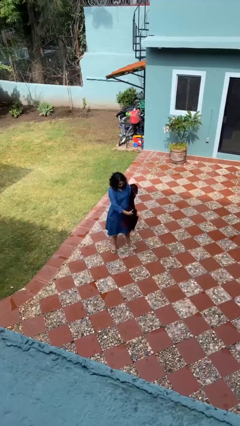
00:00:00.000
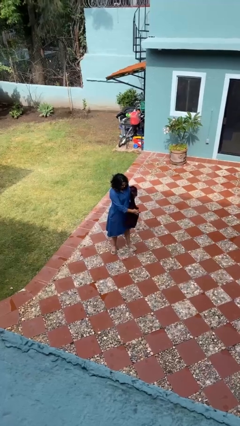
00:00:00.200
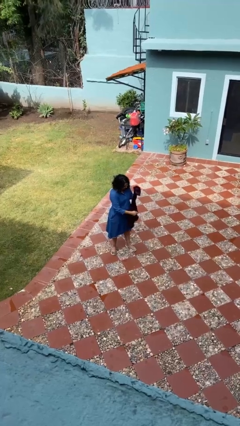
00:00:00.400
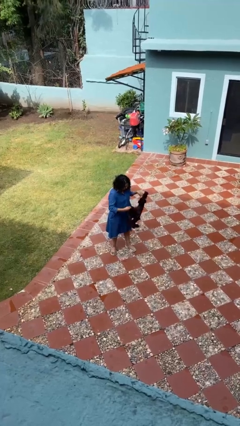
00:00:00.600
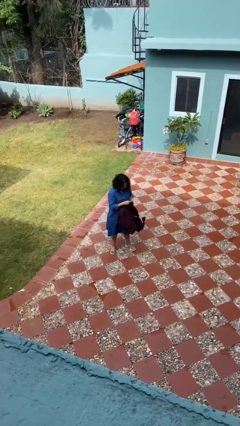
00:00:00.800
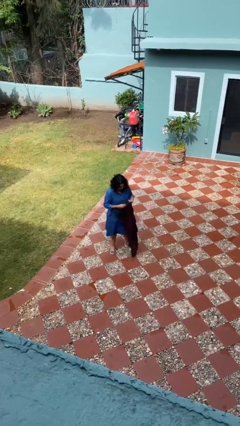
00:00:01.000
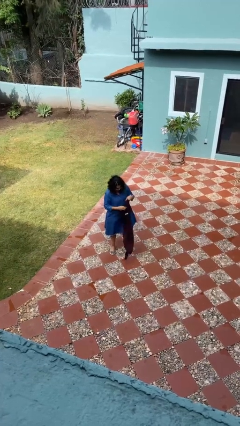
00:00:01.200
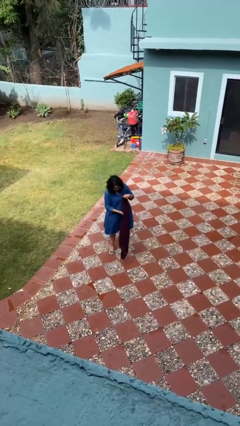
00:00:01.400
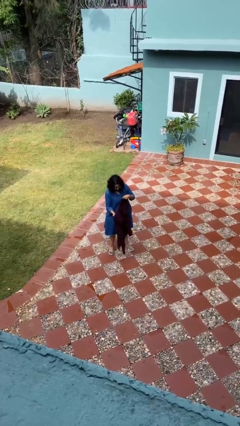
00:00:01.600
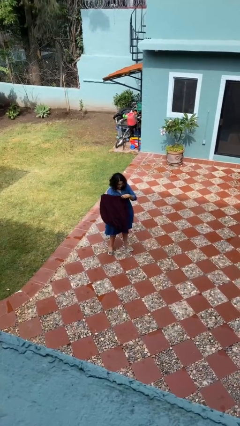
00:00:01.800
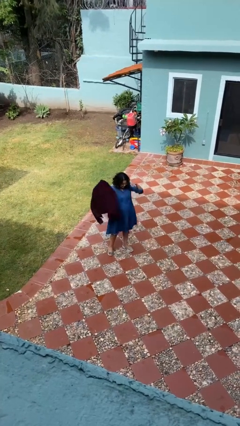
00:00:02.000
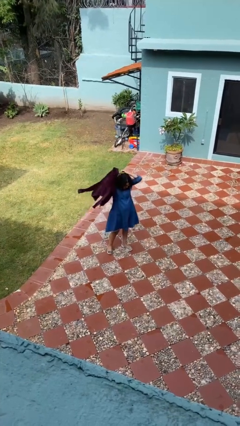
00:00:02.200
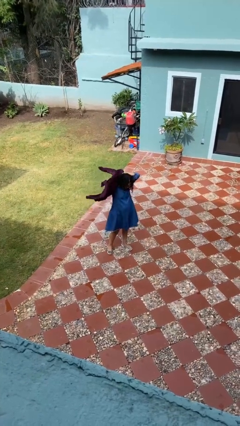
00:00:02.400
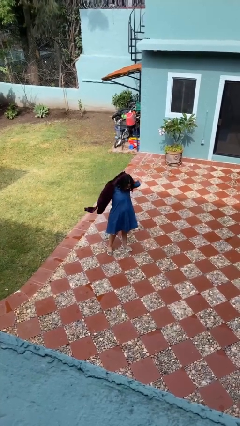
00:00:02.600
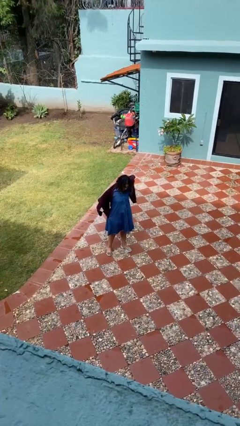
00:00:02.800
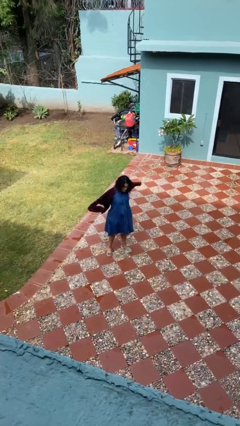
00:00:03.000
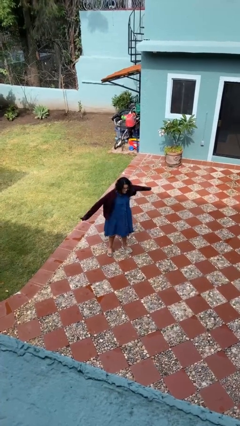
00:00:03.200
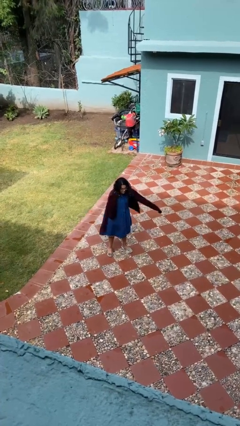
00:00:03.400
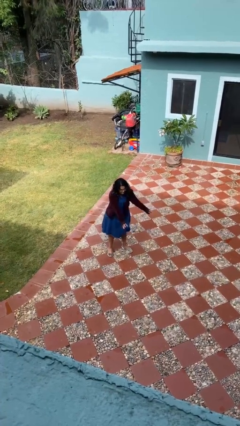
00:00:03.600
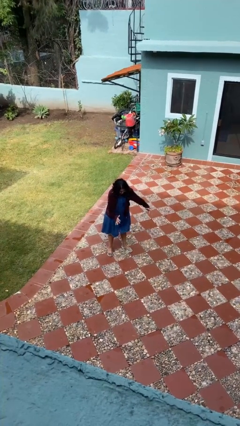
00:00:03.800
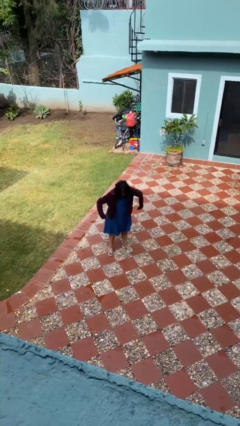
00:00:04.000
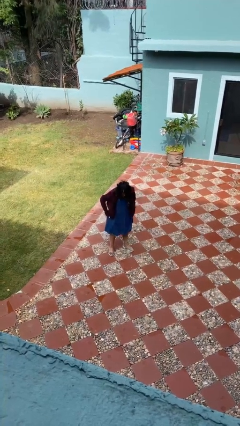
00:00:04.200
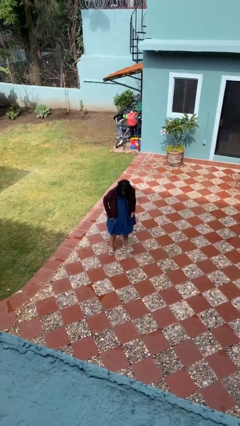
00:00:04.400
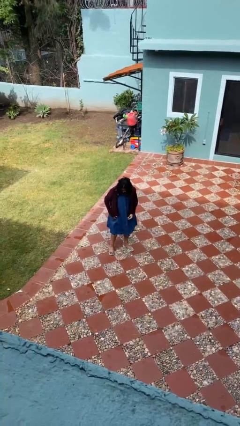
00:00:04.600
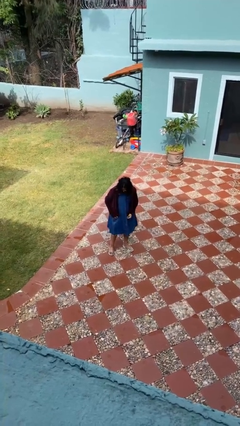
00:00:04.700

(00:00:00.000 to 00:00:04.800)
person puts on jacket

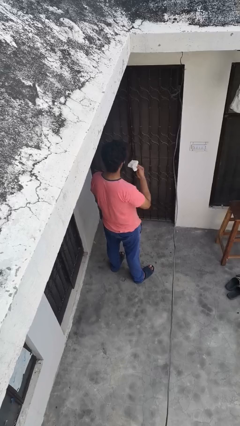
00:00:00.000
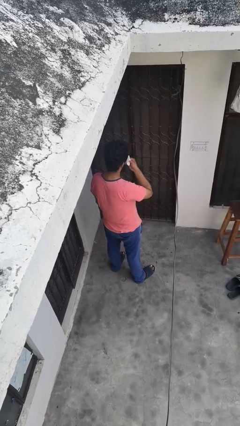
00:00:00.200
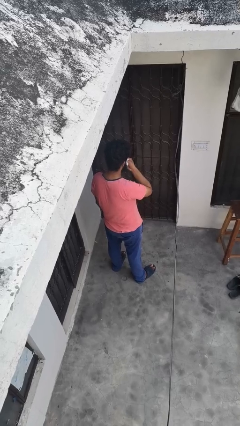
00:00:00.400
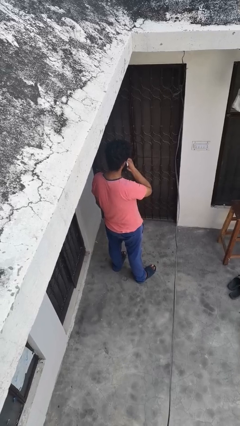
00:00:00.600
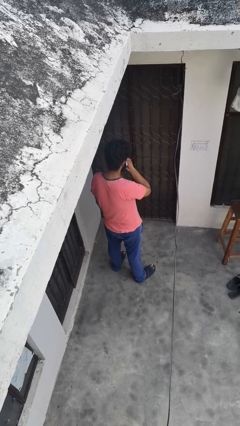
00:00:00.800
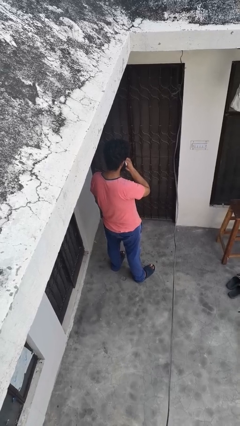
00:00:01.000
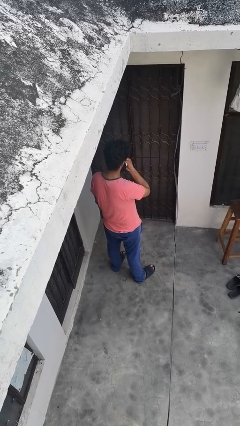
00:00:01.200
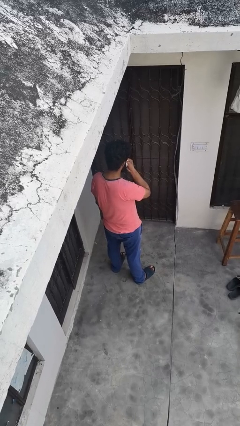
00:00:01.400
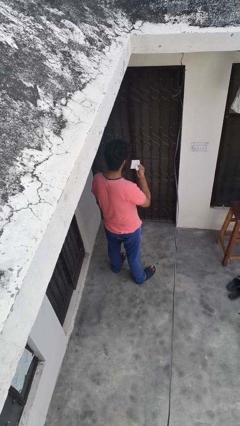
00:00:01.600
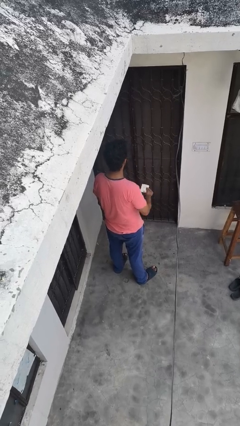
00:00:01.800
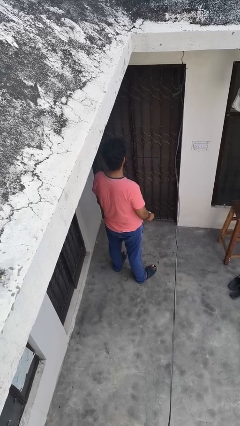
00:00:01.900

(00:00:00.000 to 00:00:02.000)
person wipes mouth with napkin

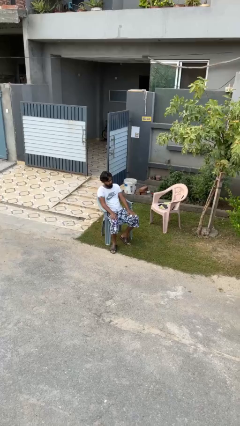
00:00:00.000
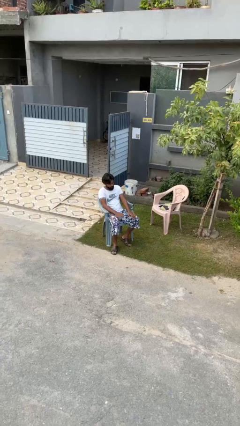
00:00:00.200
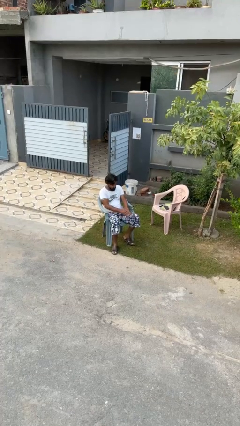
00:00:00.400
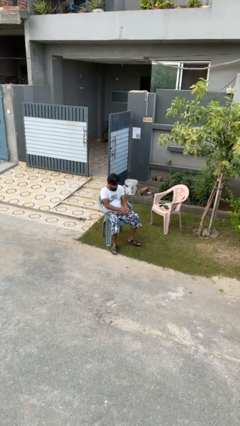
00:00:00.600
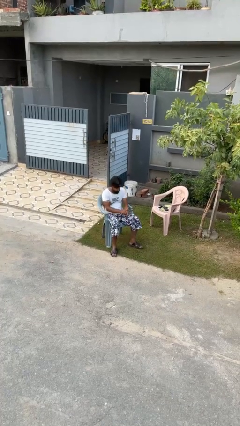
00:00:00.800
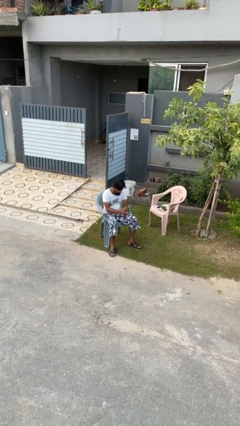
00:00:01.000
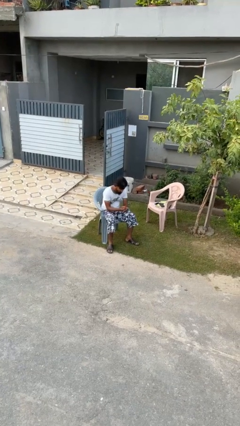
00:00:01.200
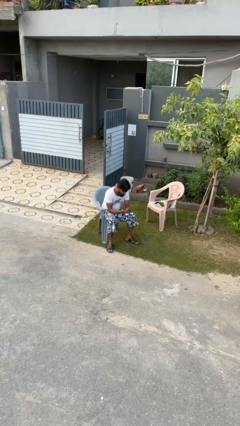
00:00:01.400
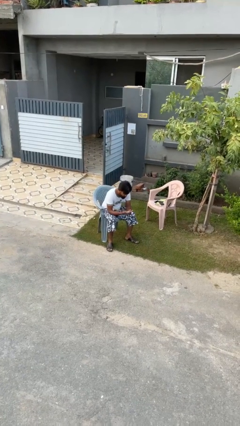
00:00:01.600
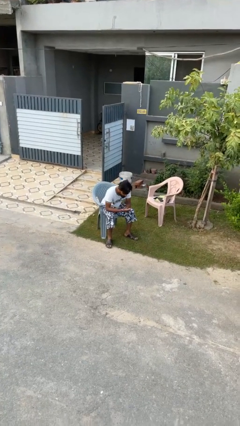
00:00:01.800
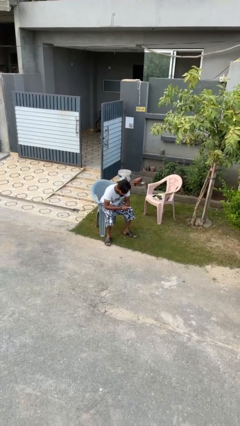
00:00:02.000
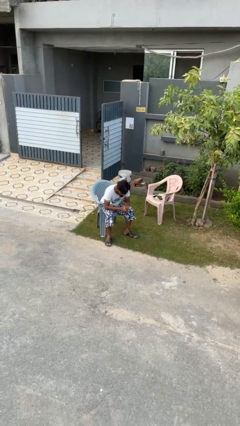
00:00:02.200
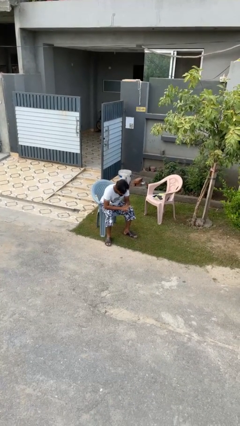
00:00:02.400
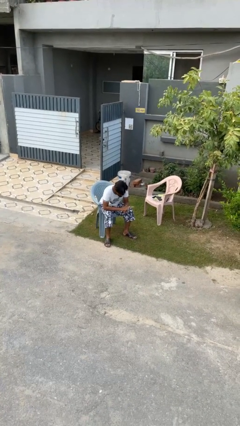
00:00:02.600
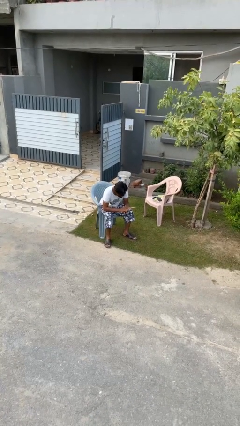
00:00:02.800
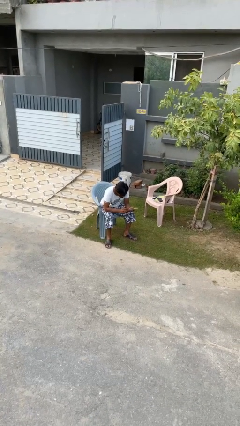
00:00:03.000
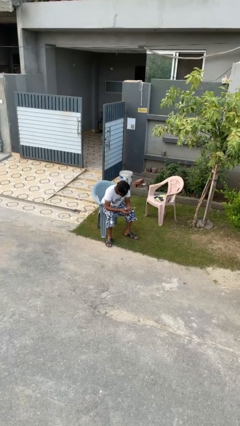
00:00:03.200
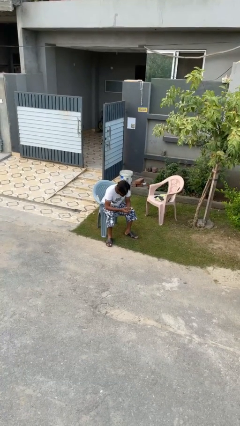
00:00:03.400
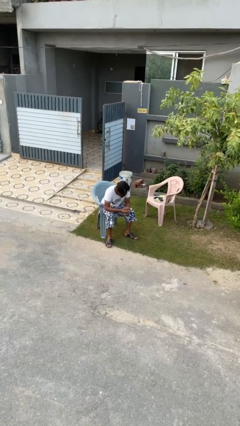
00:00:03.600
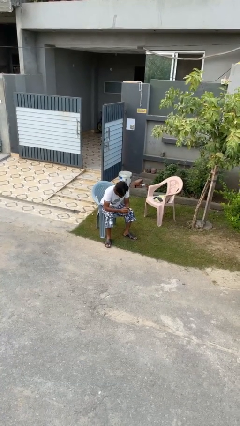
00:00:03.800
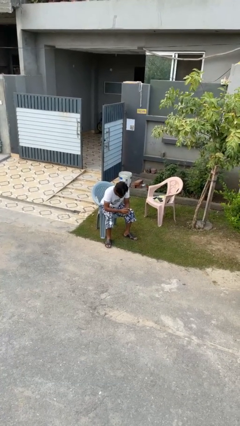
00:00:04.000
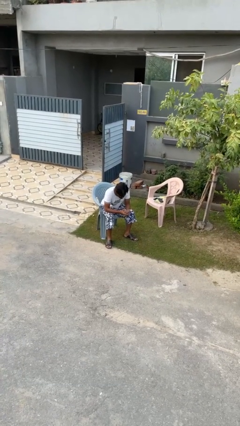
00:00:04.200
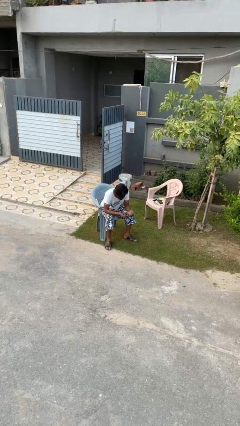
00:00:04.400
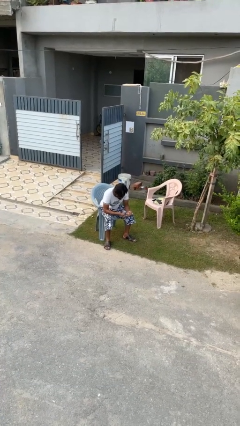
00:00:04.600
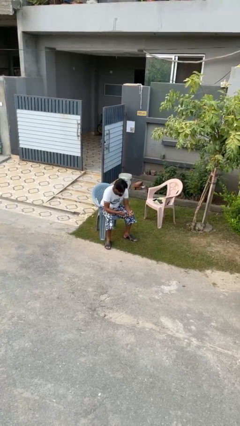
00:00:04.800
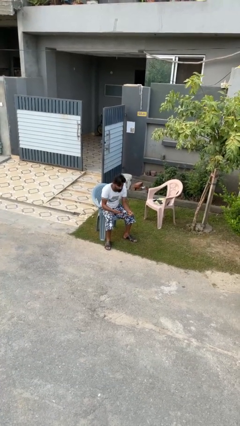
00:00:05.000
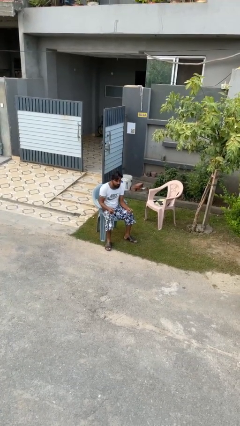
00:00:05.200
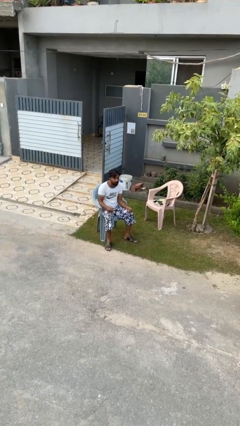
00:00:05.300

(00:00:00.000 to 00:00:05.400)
person looks at hands in lap

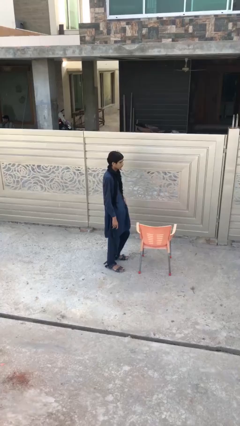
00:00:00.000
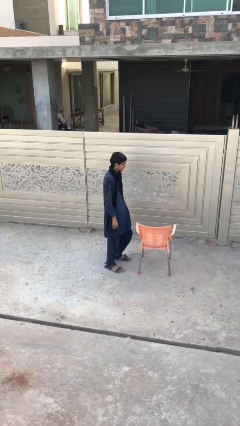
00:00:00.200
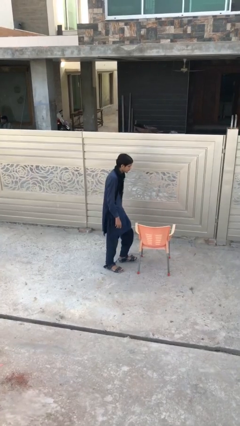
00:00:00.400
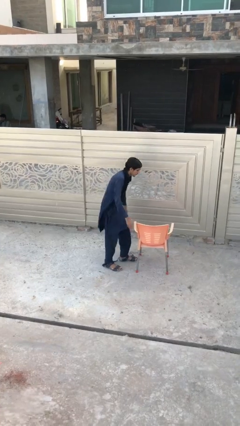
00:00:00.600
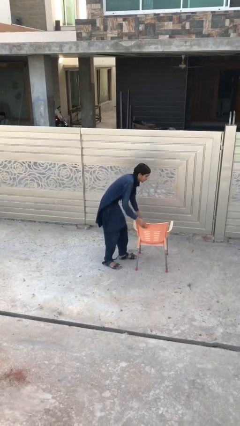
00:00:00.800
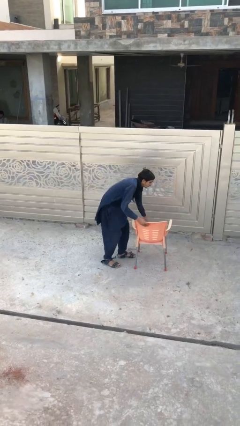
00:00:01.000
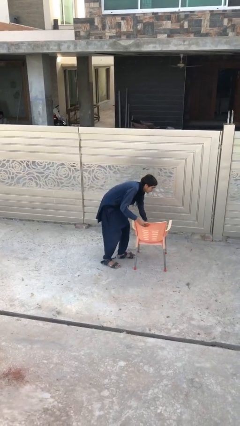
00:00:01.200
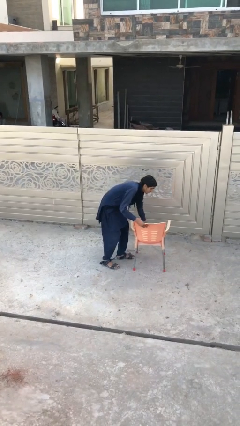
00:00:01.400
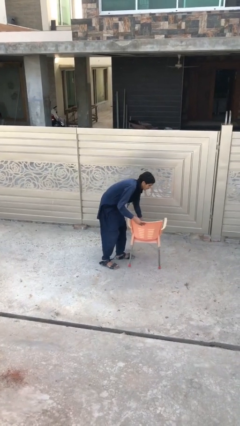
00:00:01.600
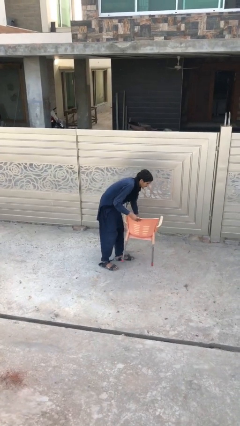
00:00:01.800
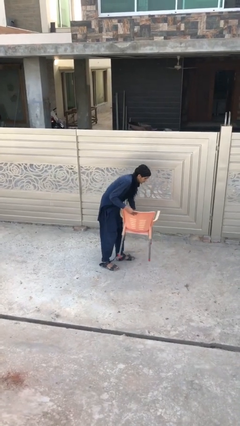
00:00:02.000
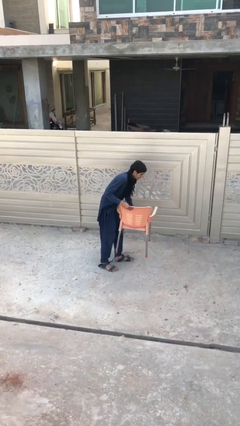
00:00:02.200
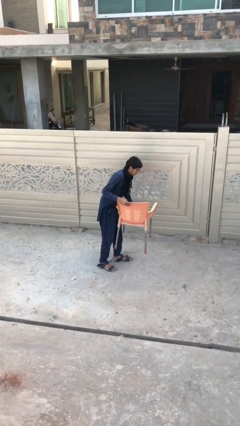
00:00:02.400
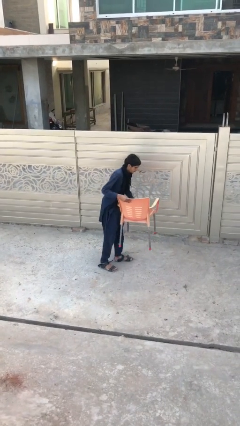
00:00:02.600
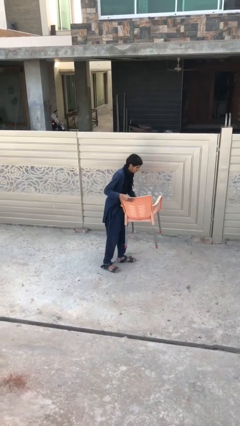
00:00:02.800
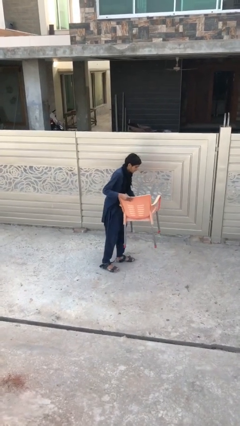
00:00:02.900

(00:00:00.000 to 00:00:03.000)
person picks up object from floor

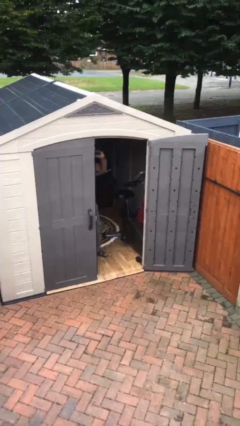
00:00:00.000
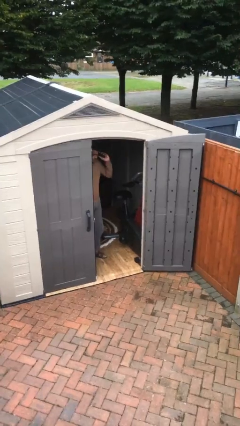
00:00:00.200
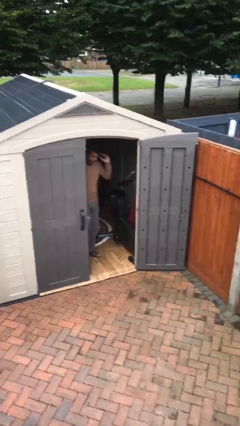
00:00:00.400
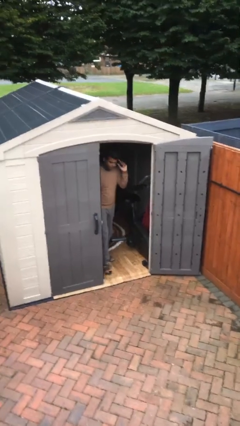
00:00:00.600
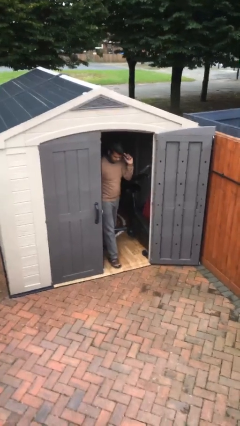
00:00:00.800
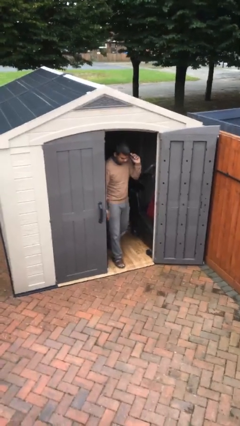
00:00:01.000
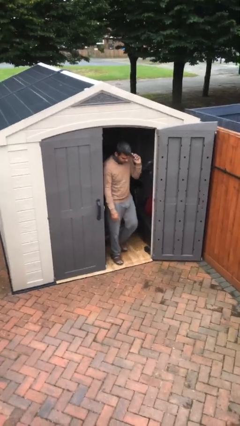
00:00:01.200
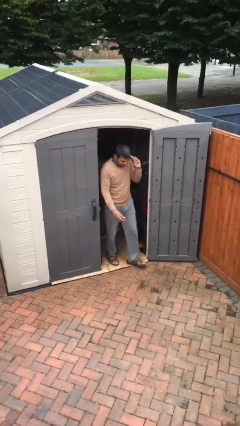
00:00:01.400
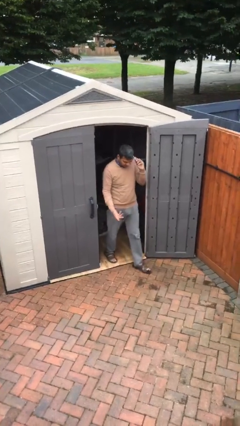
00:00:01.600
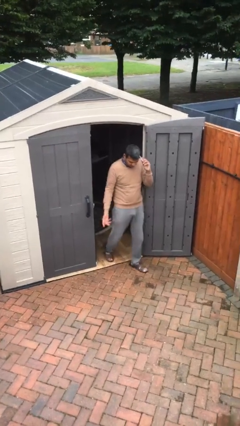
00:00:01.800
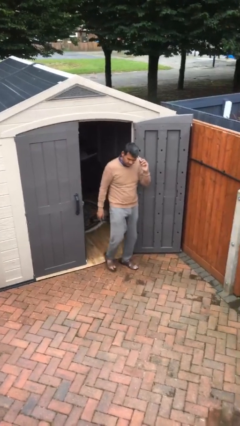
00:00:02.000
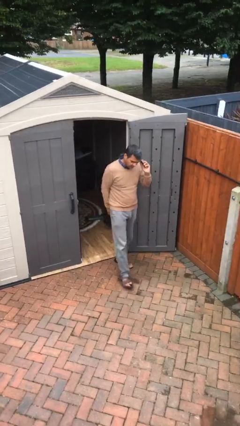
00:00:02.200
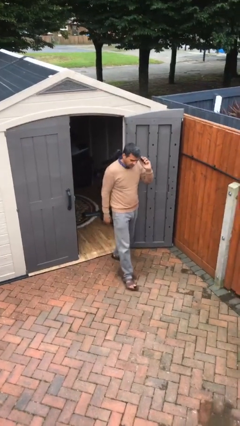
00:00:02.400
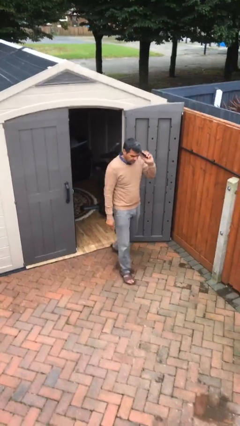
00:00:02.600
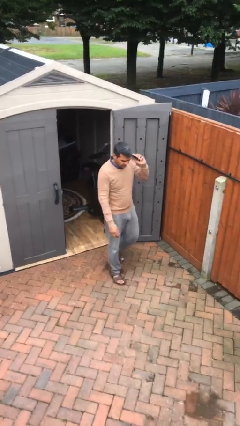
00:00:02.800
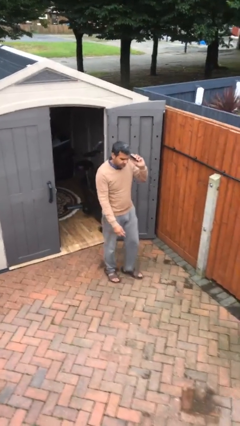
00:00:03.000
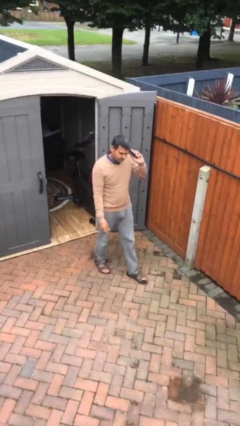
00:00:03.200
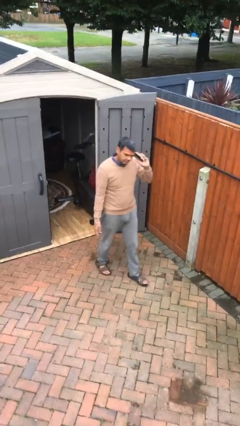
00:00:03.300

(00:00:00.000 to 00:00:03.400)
person enters scene through structure
